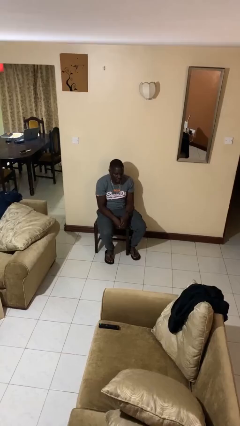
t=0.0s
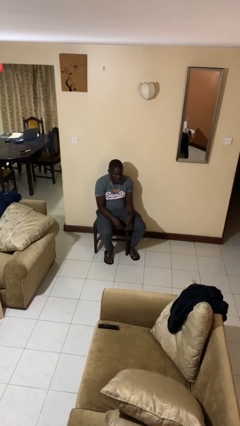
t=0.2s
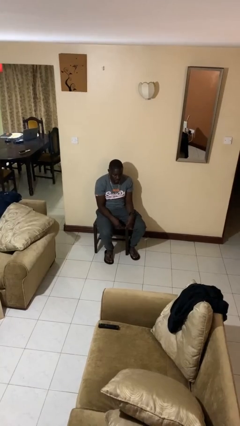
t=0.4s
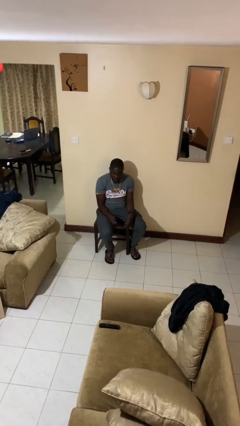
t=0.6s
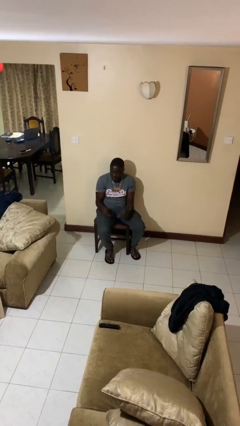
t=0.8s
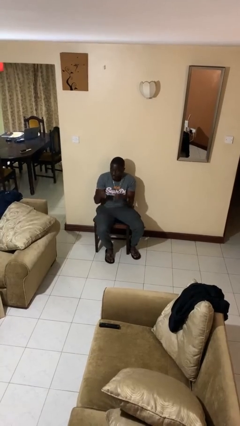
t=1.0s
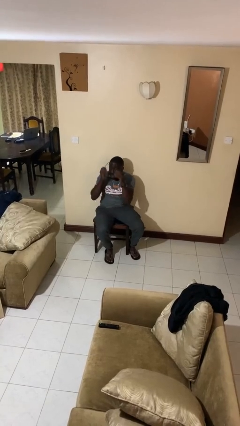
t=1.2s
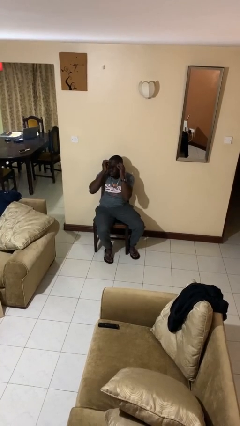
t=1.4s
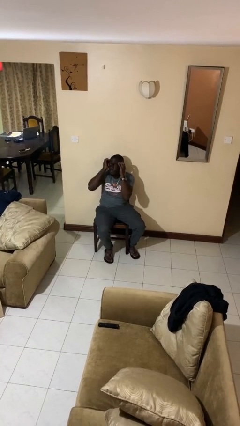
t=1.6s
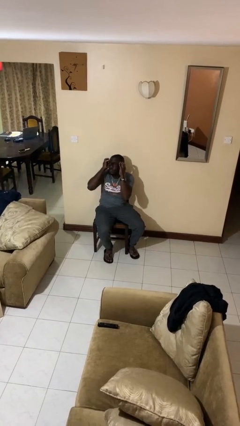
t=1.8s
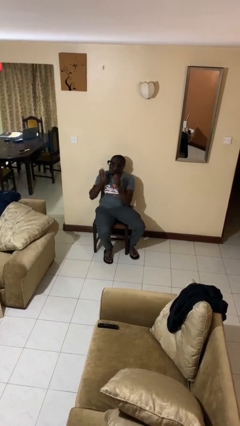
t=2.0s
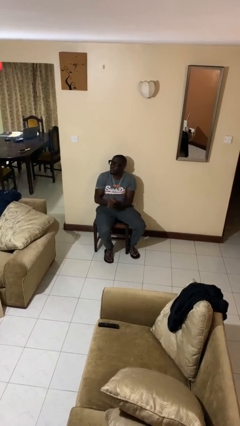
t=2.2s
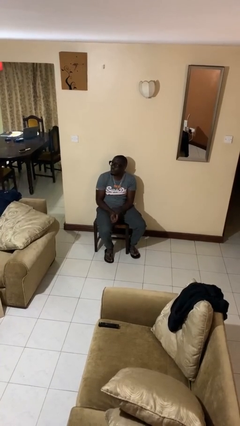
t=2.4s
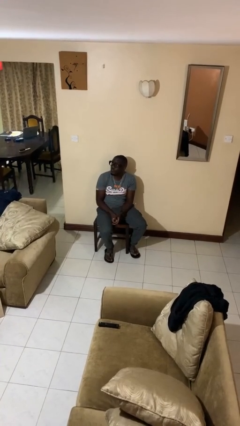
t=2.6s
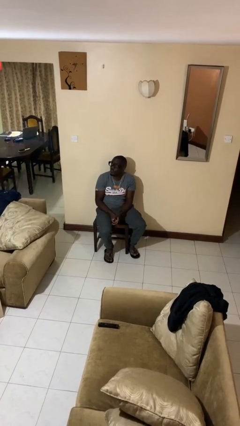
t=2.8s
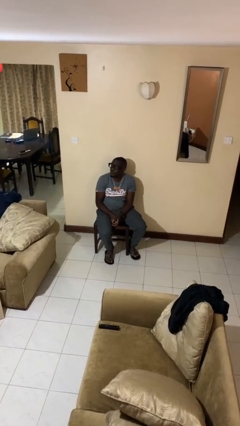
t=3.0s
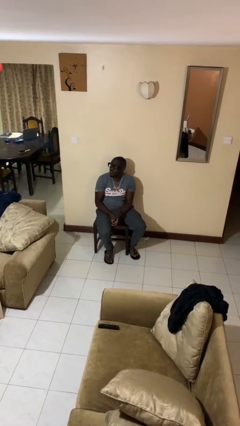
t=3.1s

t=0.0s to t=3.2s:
person puts on glasses

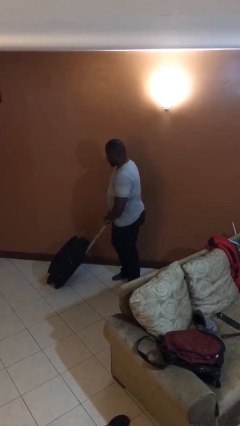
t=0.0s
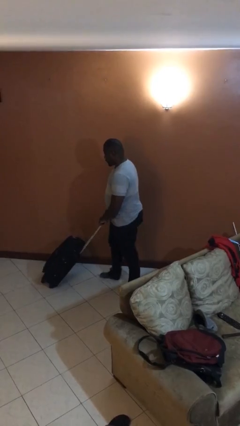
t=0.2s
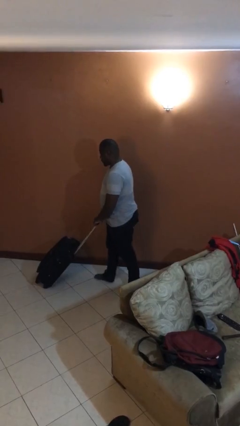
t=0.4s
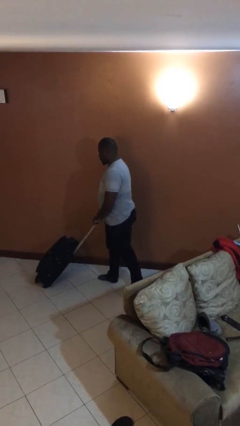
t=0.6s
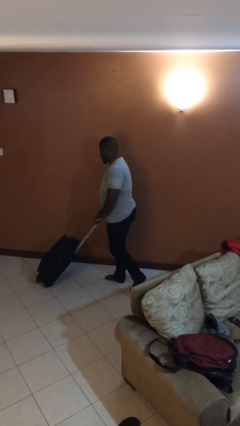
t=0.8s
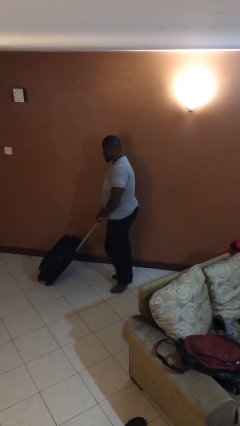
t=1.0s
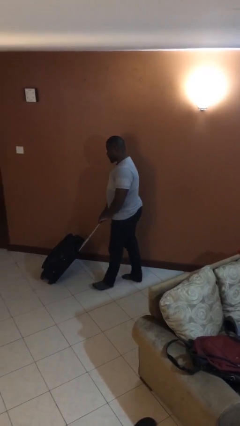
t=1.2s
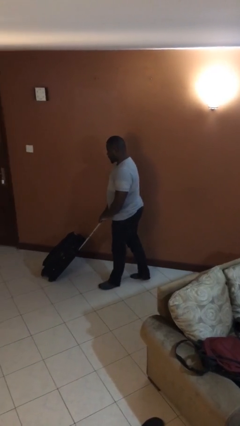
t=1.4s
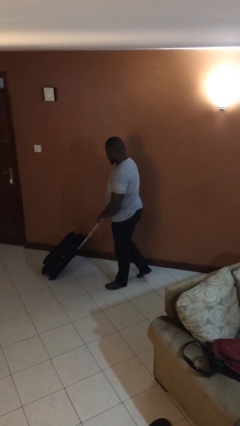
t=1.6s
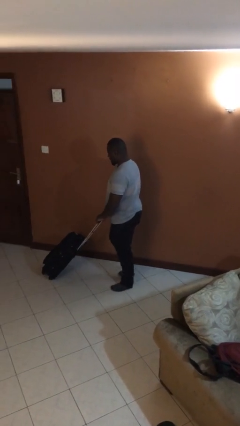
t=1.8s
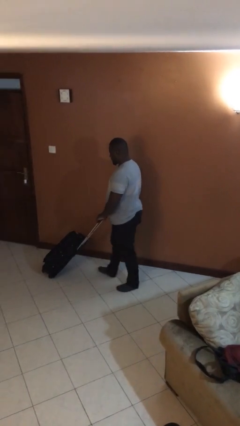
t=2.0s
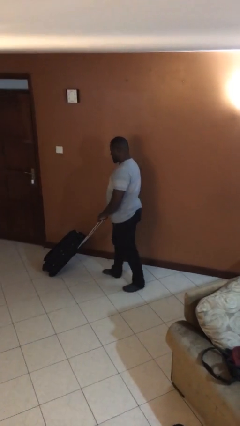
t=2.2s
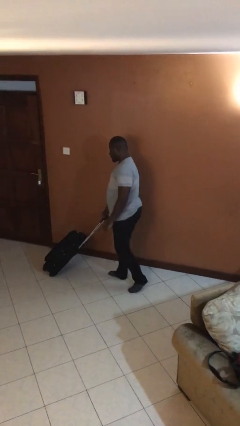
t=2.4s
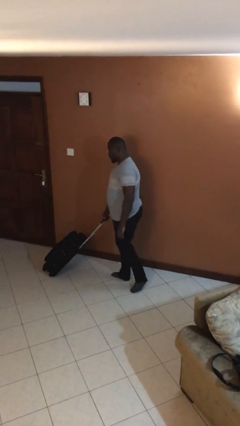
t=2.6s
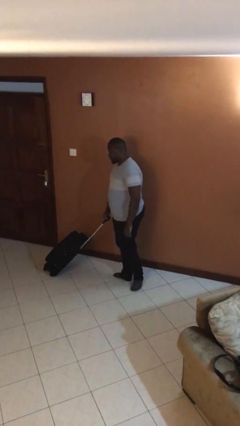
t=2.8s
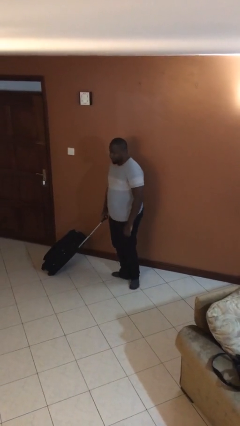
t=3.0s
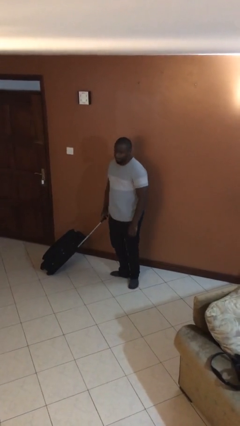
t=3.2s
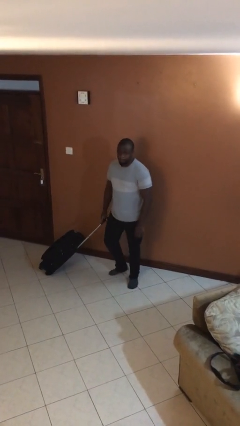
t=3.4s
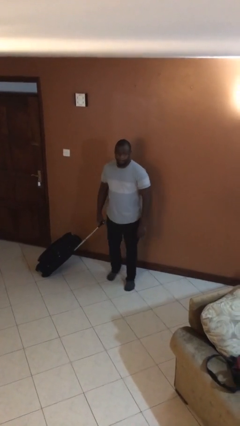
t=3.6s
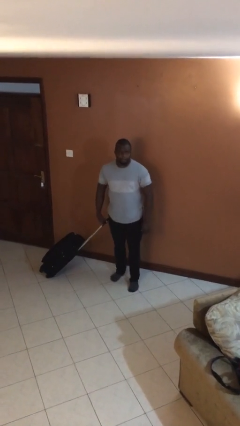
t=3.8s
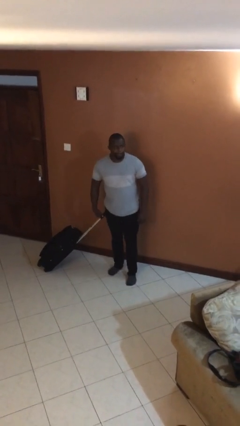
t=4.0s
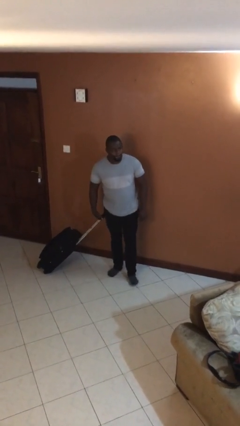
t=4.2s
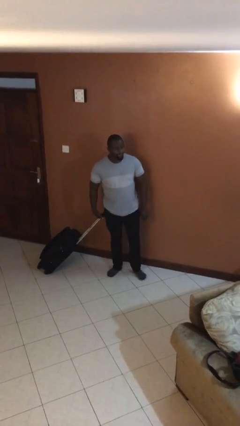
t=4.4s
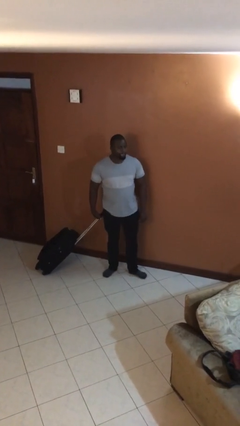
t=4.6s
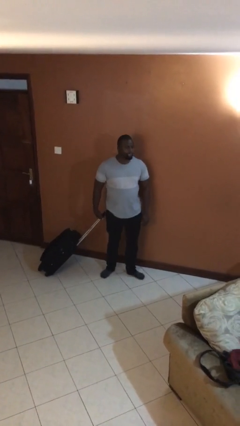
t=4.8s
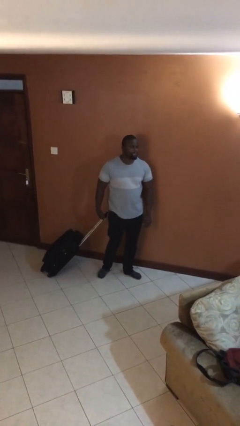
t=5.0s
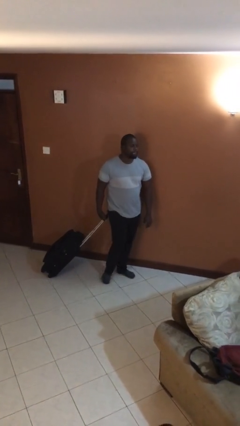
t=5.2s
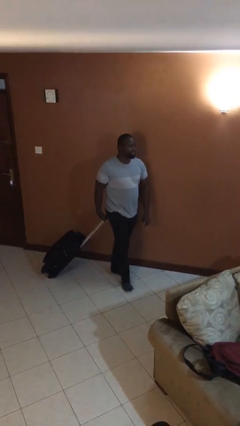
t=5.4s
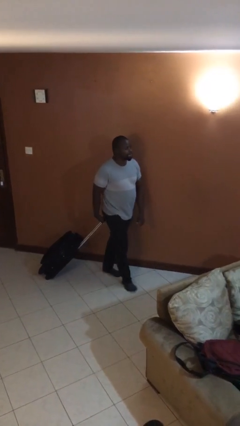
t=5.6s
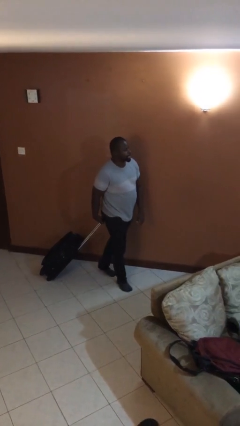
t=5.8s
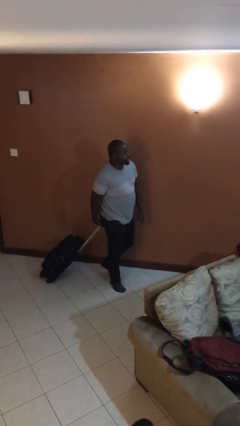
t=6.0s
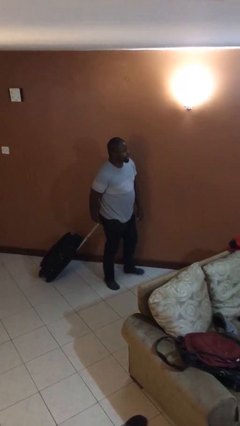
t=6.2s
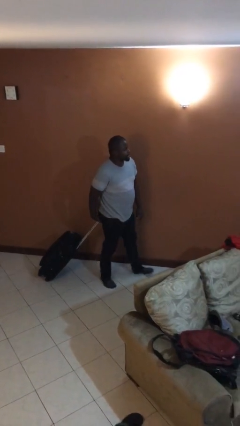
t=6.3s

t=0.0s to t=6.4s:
person pushes wheeled cart

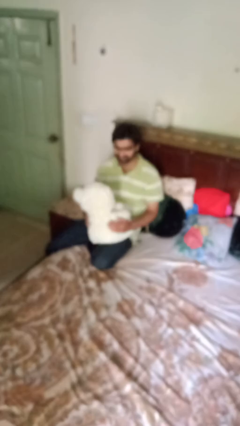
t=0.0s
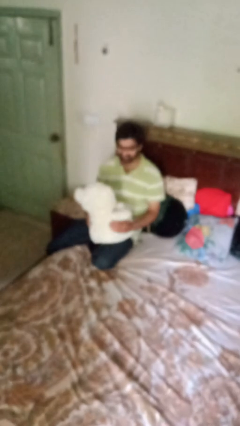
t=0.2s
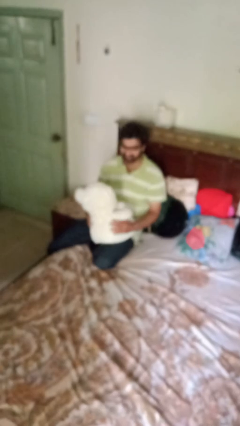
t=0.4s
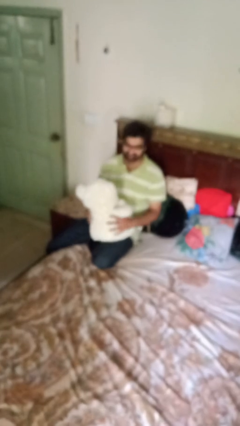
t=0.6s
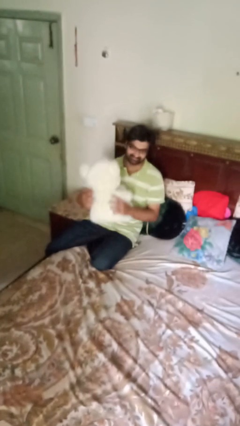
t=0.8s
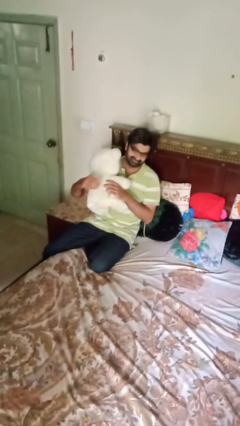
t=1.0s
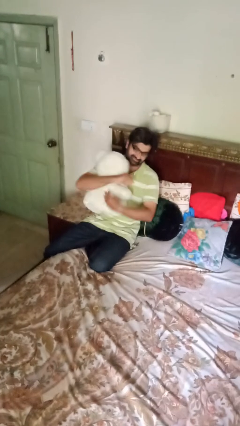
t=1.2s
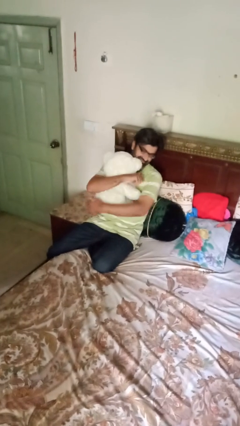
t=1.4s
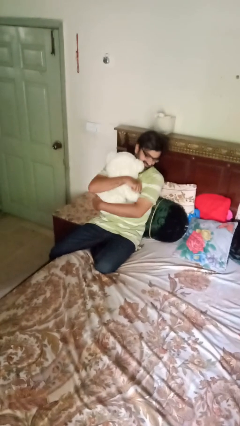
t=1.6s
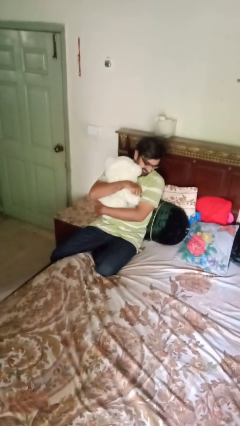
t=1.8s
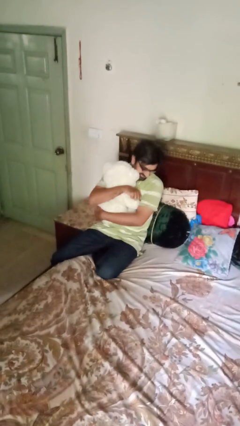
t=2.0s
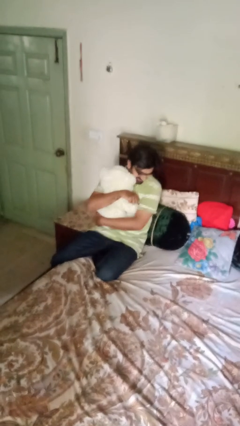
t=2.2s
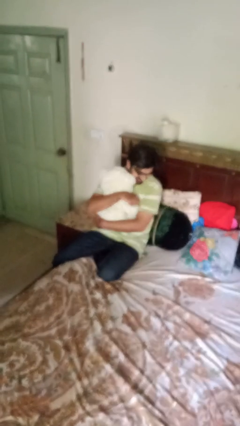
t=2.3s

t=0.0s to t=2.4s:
person hugs stuffed animal

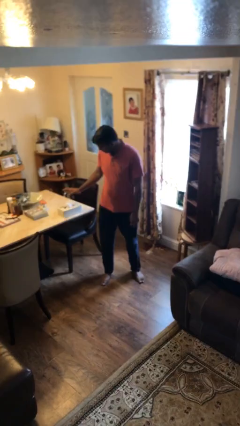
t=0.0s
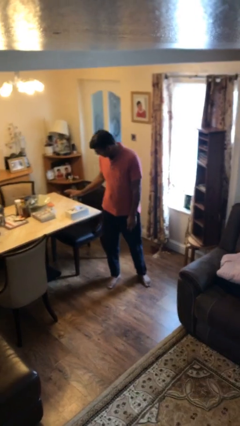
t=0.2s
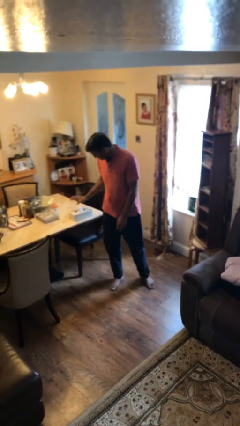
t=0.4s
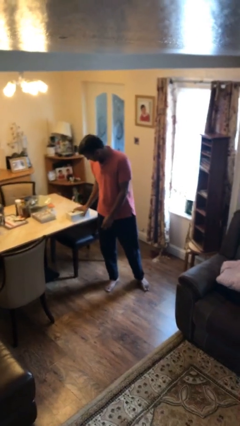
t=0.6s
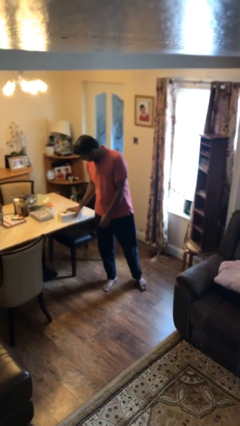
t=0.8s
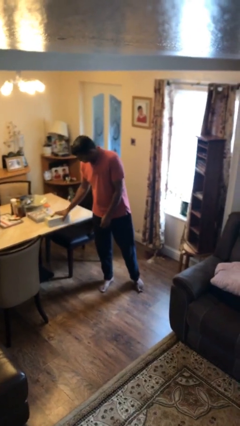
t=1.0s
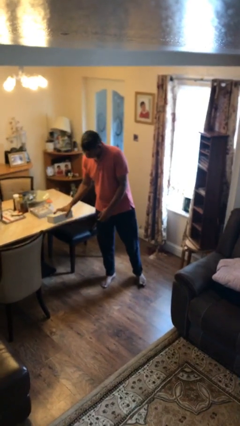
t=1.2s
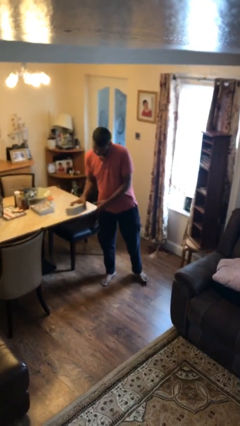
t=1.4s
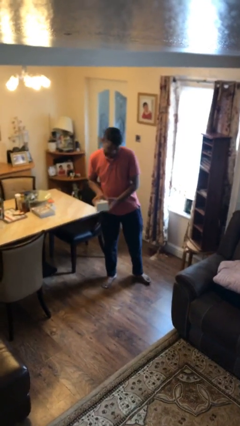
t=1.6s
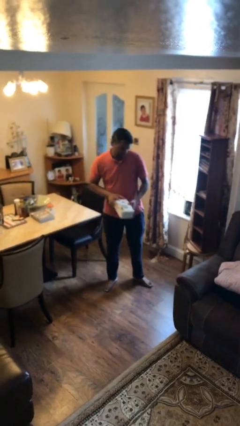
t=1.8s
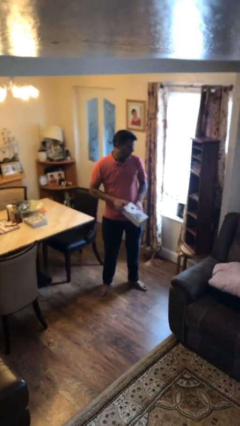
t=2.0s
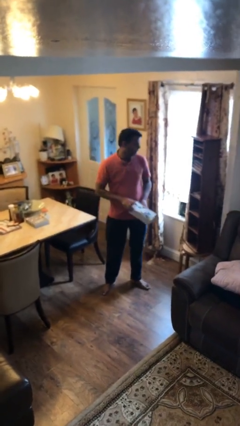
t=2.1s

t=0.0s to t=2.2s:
person picks up object from table

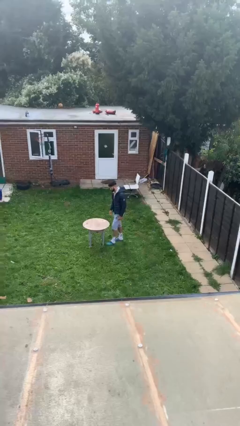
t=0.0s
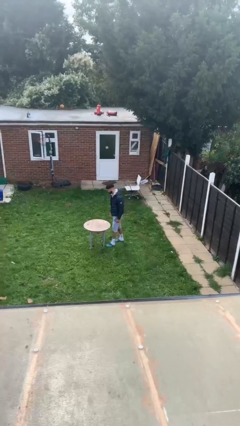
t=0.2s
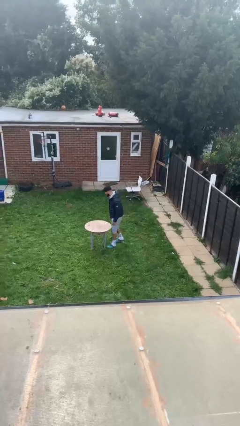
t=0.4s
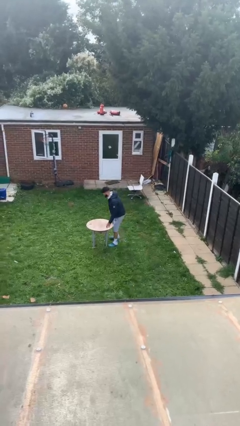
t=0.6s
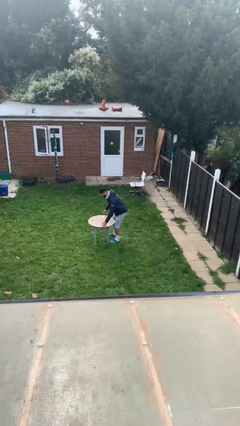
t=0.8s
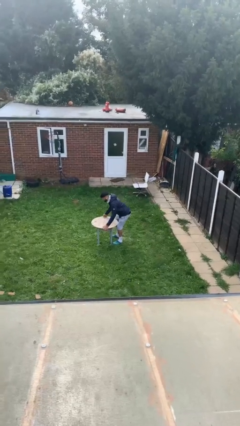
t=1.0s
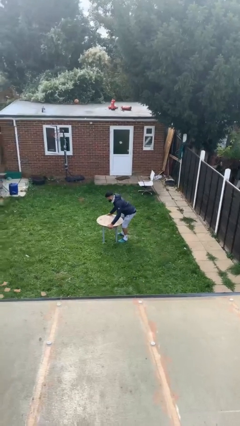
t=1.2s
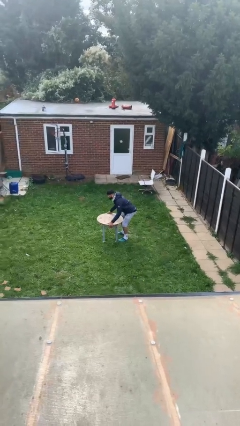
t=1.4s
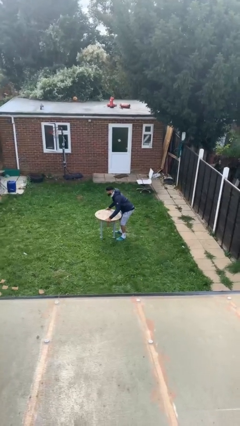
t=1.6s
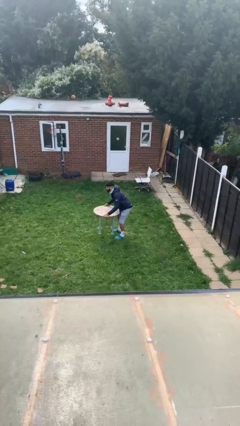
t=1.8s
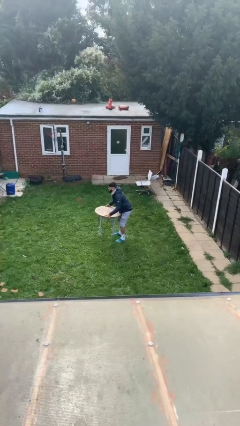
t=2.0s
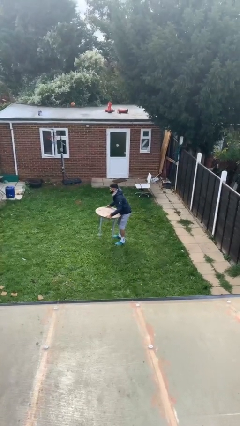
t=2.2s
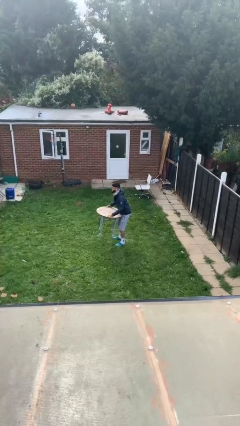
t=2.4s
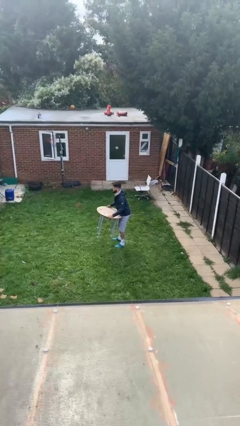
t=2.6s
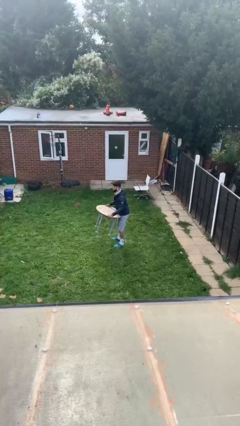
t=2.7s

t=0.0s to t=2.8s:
person picks up object from floor

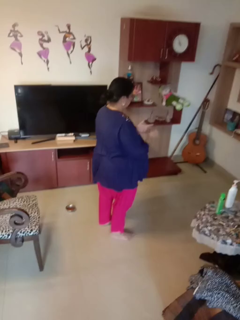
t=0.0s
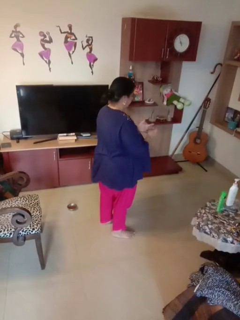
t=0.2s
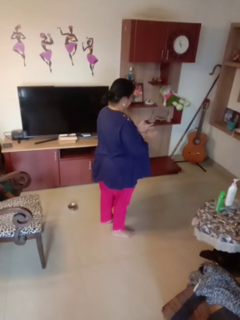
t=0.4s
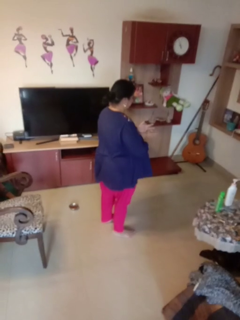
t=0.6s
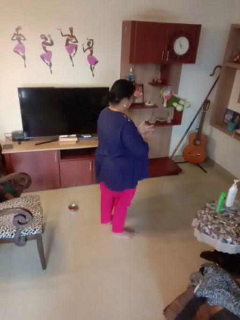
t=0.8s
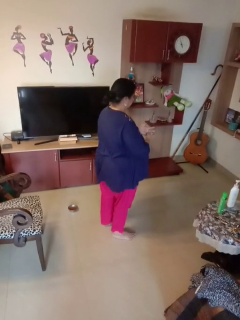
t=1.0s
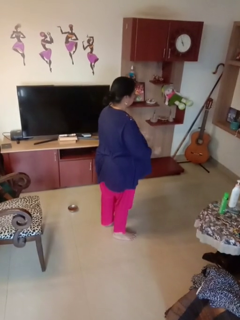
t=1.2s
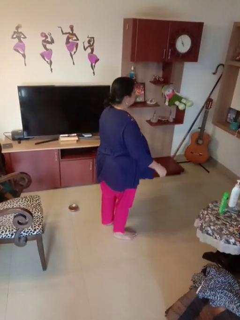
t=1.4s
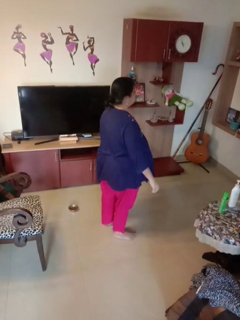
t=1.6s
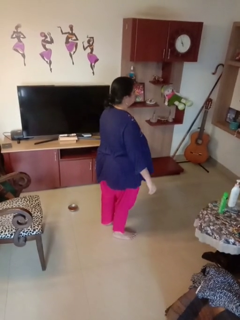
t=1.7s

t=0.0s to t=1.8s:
person puts on ring
